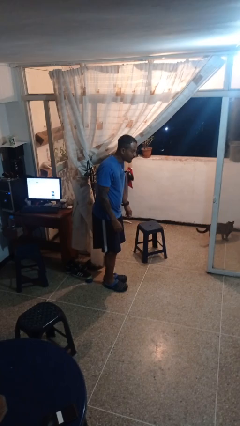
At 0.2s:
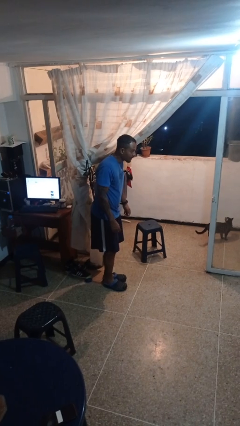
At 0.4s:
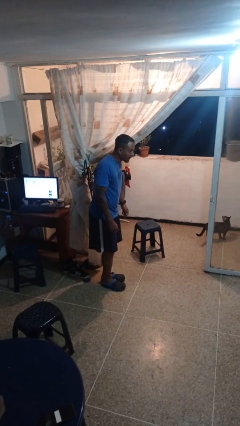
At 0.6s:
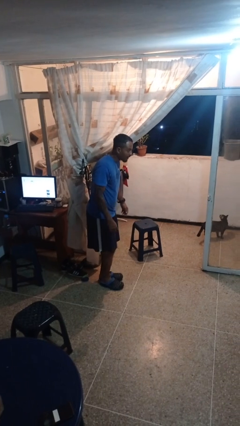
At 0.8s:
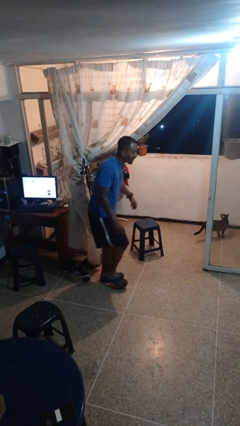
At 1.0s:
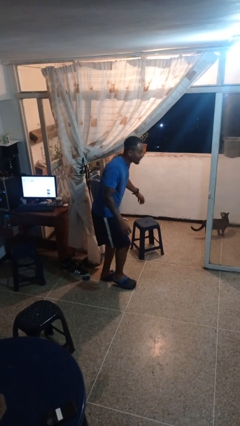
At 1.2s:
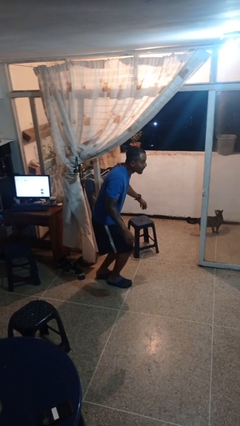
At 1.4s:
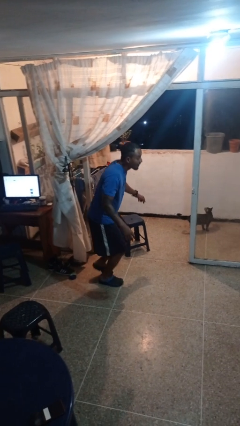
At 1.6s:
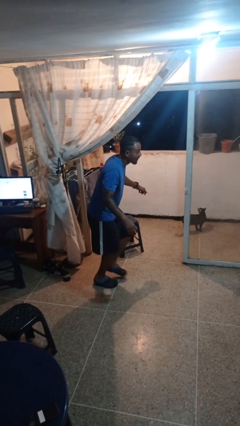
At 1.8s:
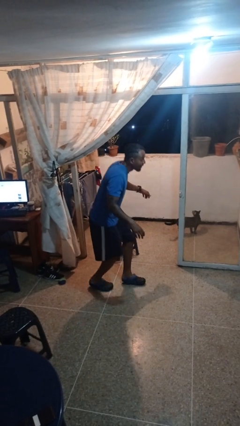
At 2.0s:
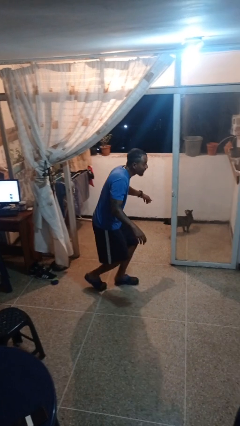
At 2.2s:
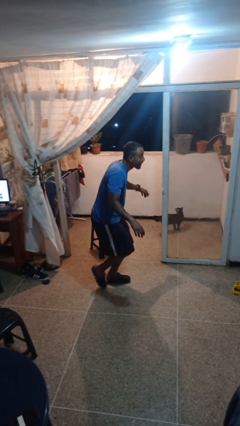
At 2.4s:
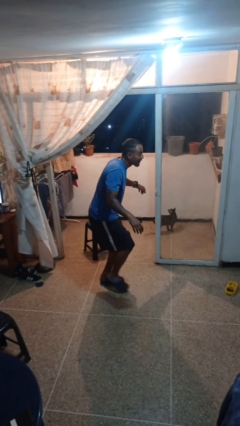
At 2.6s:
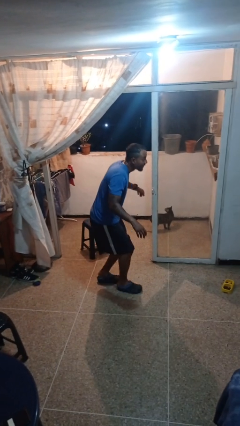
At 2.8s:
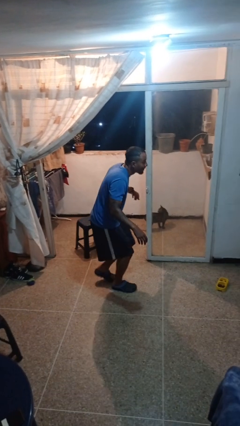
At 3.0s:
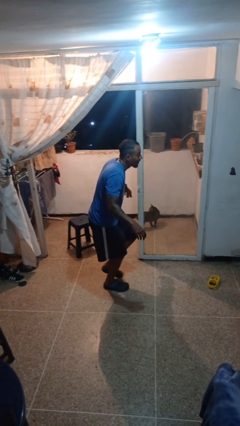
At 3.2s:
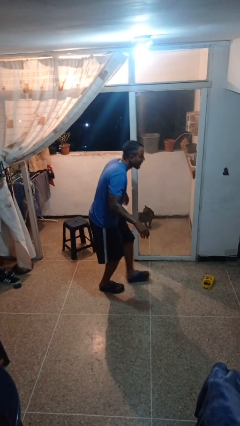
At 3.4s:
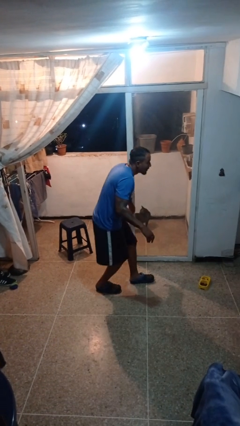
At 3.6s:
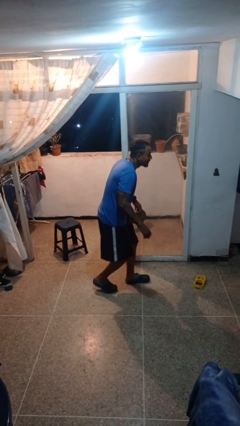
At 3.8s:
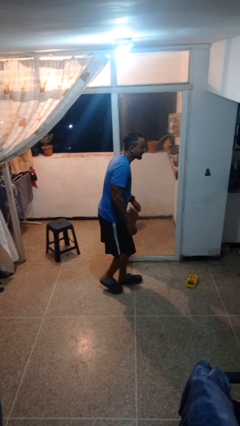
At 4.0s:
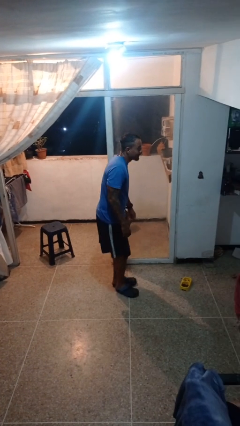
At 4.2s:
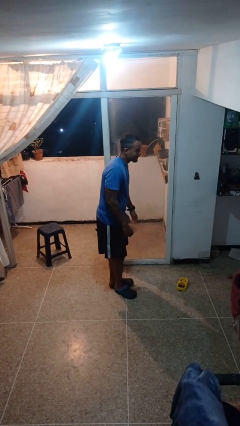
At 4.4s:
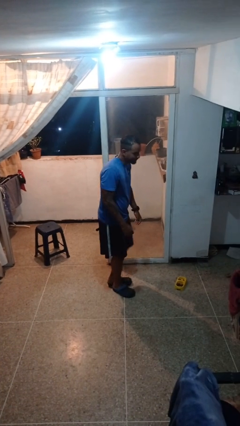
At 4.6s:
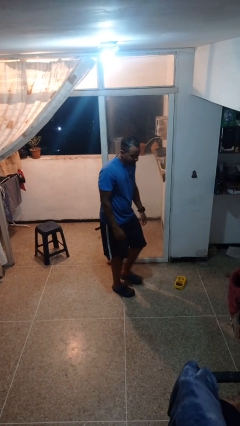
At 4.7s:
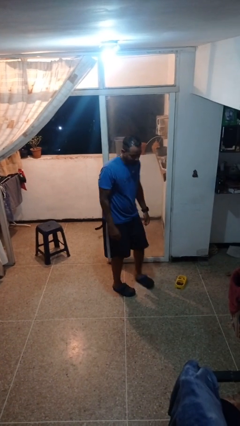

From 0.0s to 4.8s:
person walks tiptoe

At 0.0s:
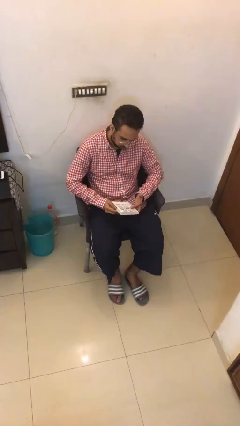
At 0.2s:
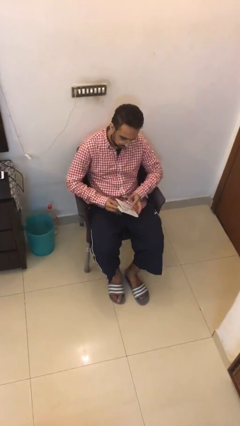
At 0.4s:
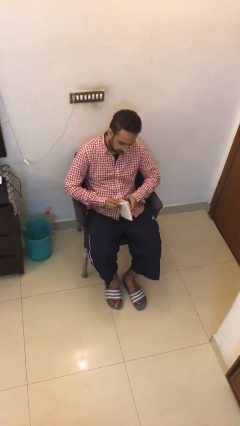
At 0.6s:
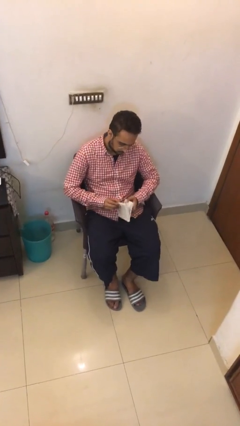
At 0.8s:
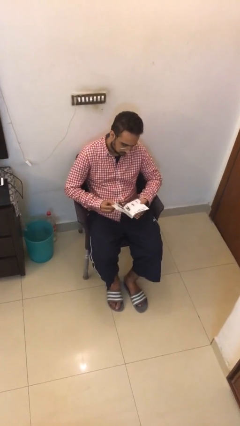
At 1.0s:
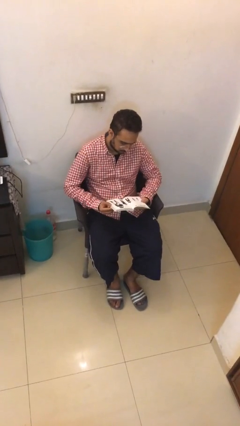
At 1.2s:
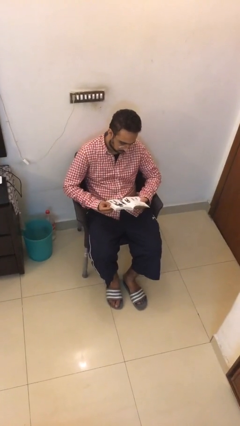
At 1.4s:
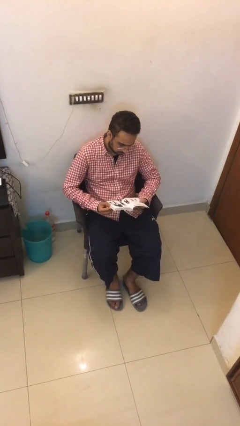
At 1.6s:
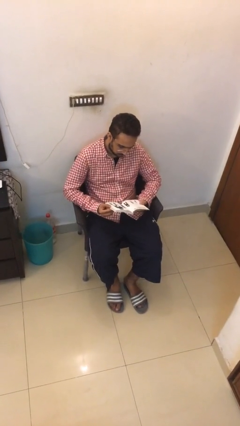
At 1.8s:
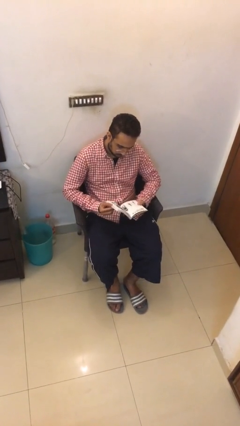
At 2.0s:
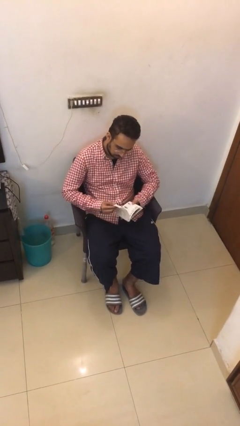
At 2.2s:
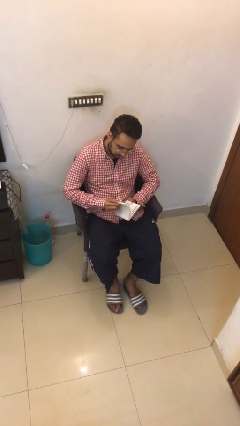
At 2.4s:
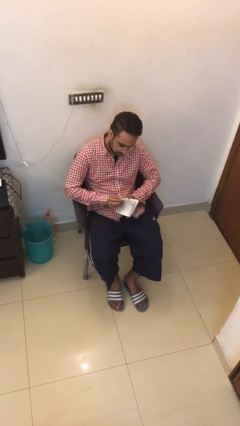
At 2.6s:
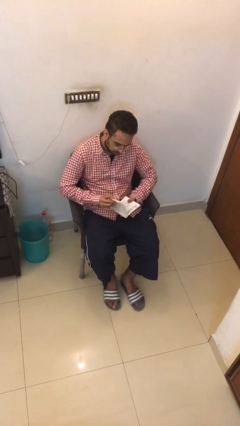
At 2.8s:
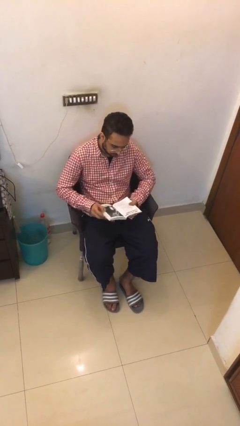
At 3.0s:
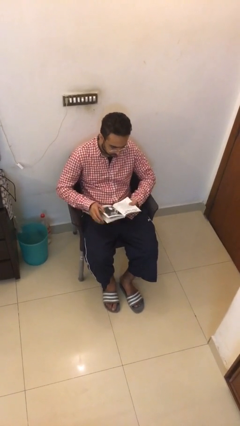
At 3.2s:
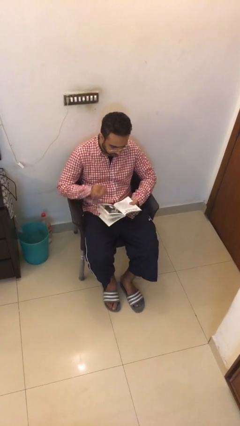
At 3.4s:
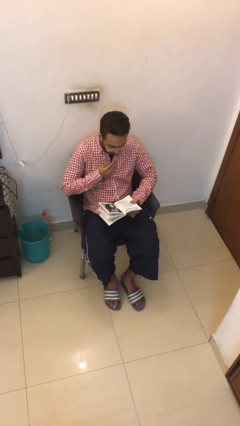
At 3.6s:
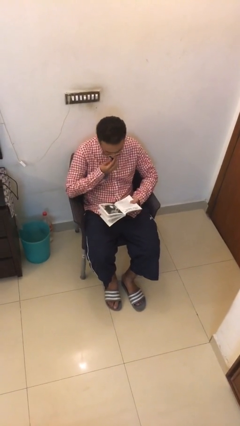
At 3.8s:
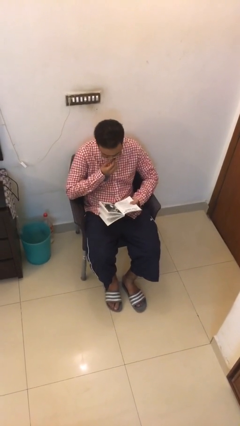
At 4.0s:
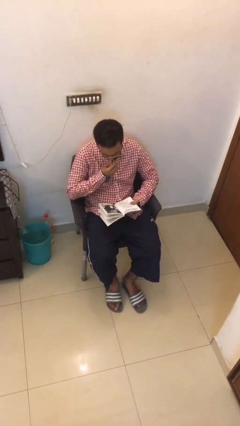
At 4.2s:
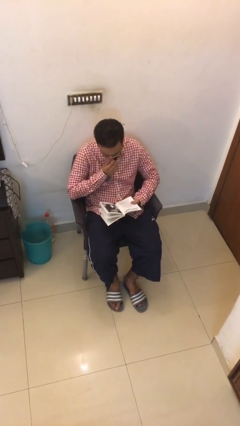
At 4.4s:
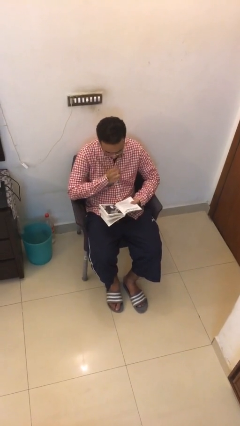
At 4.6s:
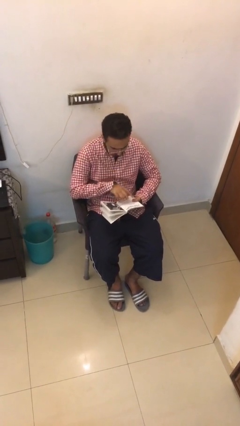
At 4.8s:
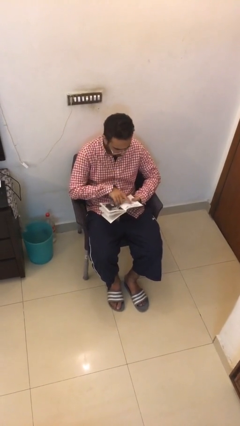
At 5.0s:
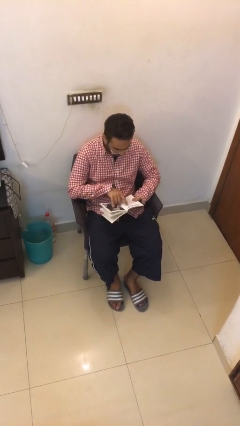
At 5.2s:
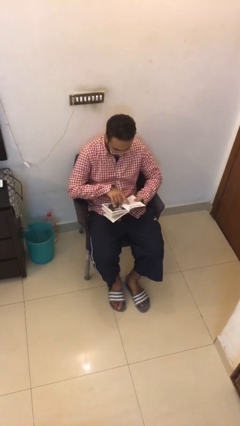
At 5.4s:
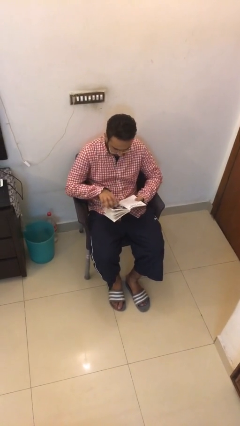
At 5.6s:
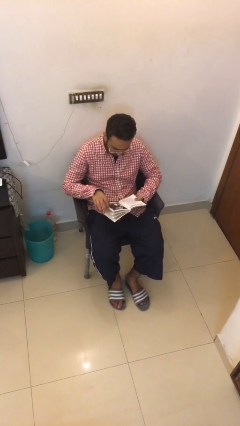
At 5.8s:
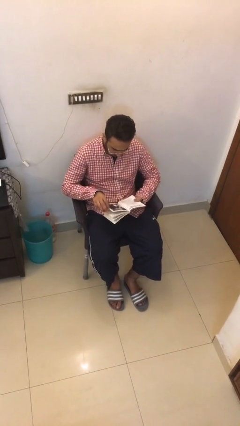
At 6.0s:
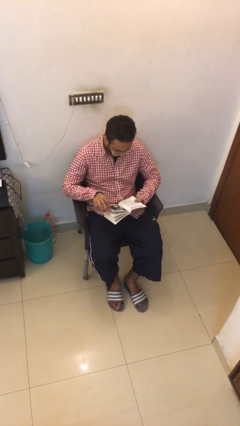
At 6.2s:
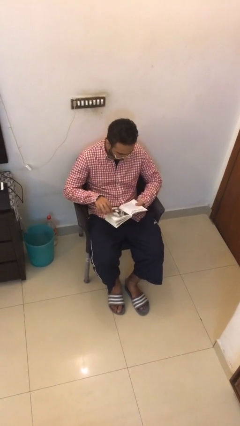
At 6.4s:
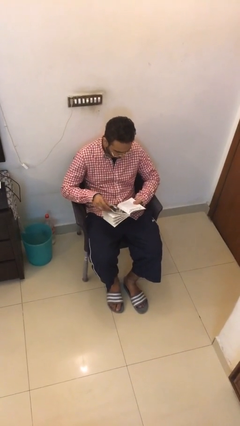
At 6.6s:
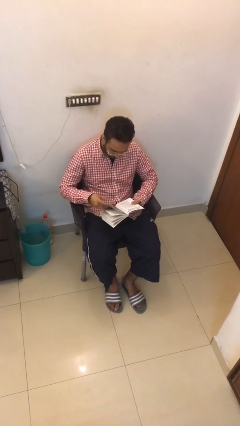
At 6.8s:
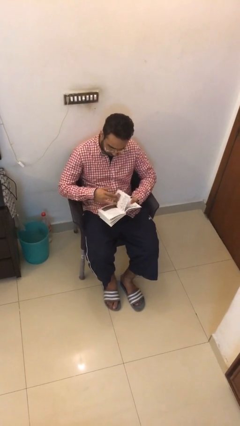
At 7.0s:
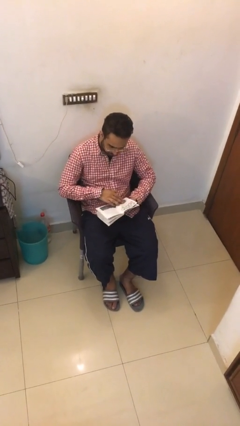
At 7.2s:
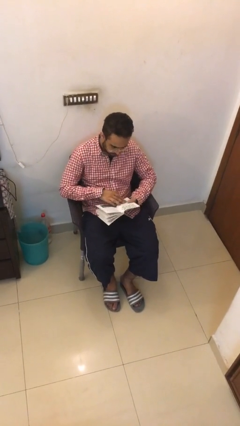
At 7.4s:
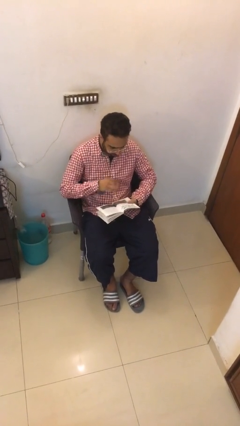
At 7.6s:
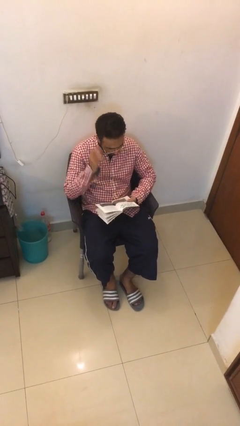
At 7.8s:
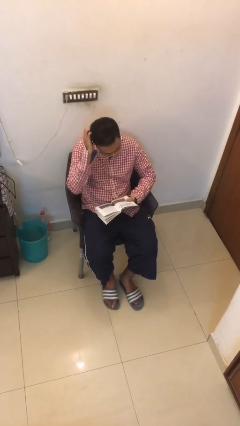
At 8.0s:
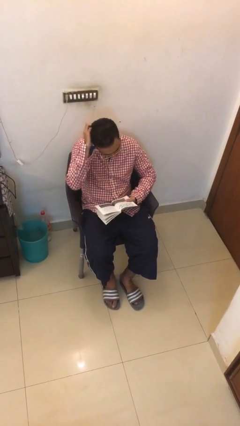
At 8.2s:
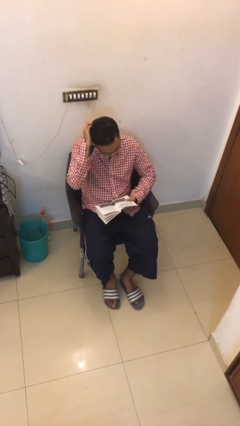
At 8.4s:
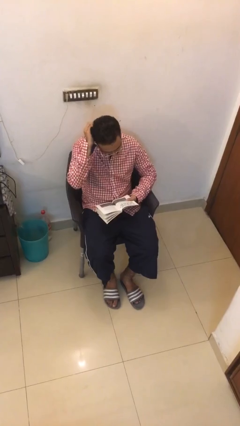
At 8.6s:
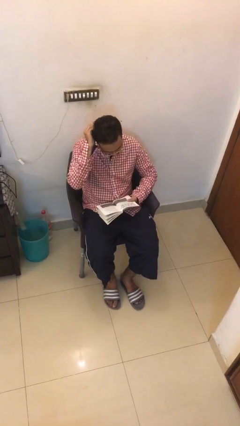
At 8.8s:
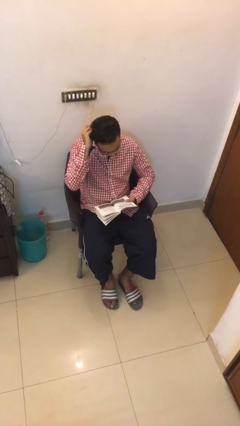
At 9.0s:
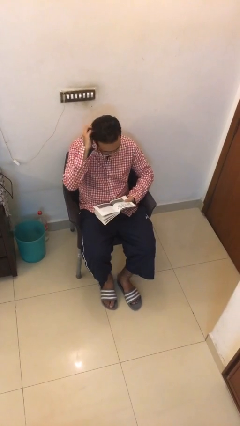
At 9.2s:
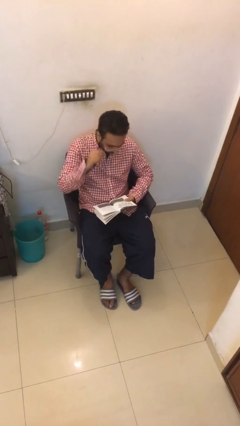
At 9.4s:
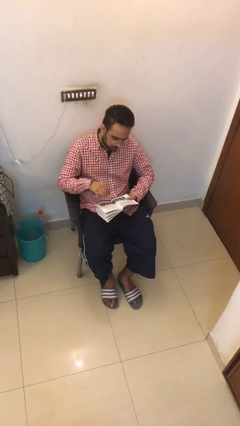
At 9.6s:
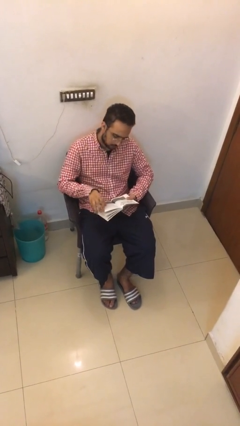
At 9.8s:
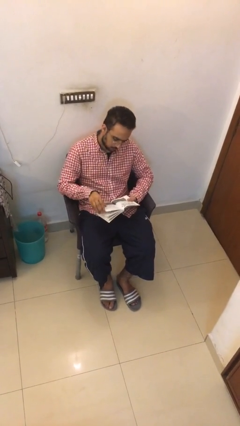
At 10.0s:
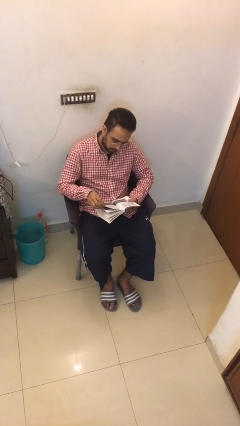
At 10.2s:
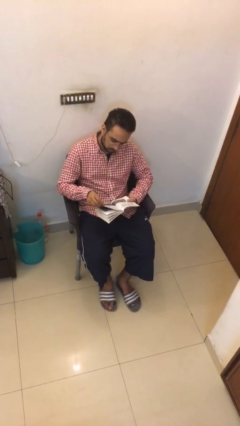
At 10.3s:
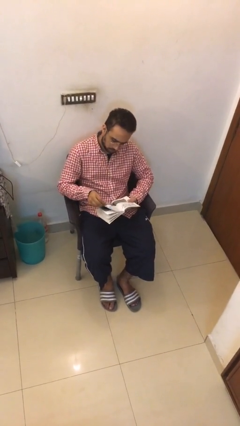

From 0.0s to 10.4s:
person reads document

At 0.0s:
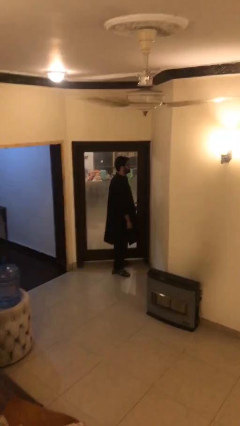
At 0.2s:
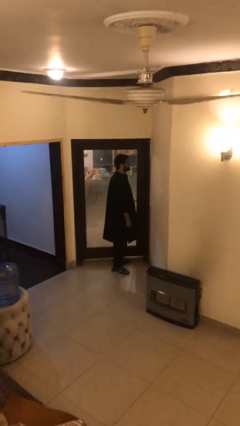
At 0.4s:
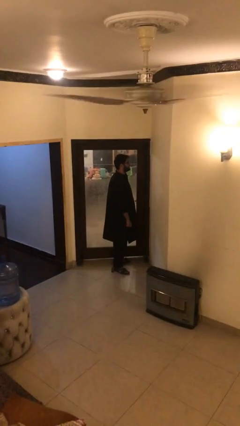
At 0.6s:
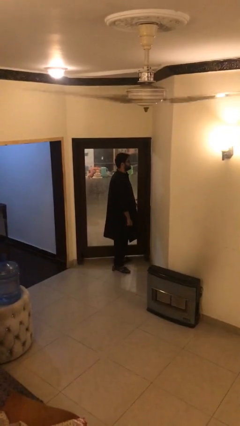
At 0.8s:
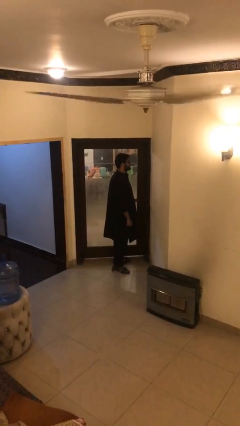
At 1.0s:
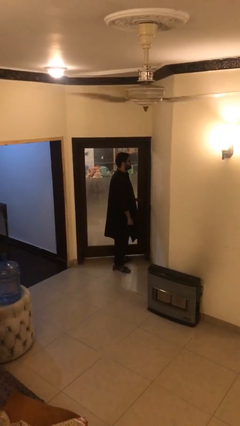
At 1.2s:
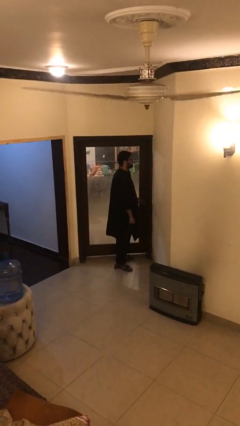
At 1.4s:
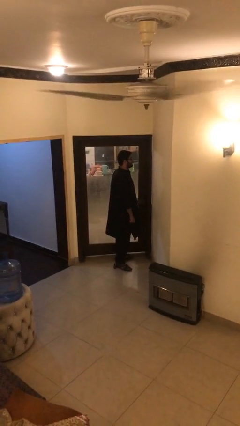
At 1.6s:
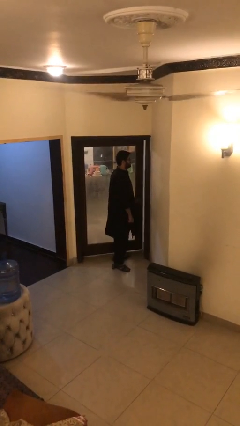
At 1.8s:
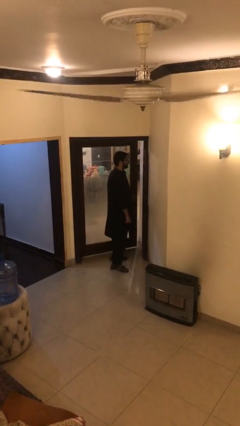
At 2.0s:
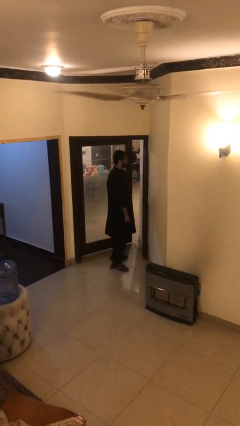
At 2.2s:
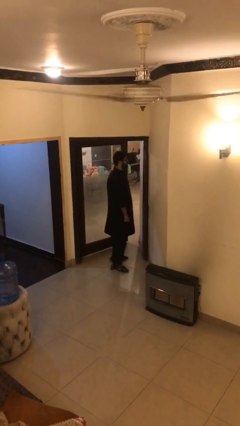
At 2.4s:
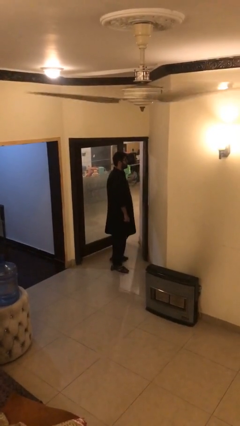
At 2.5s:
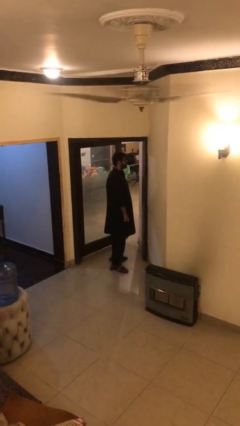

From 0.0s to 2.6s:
person opens facility door
